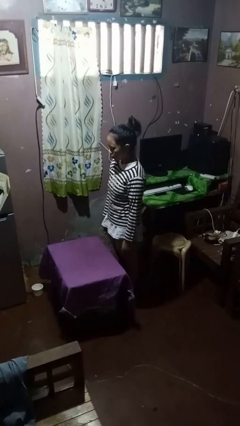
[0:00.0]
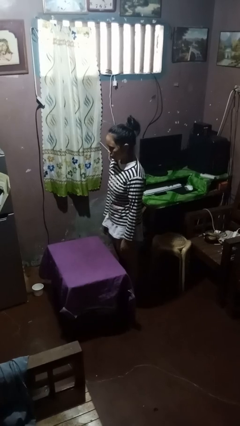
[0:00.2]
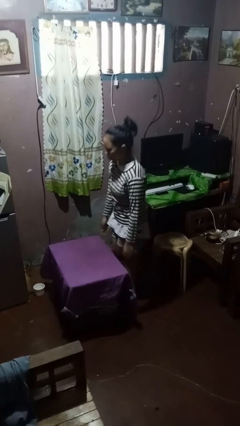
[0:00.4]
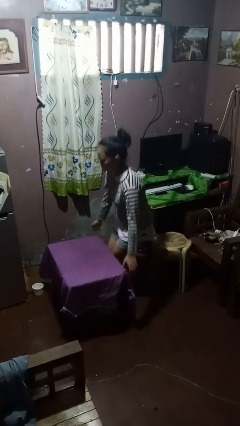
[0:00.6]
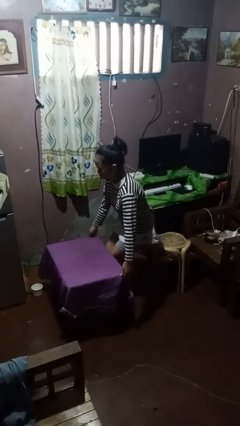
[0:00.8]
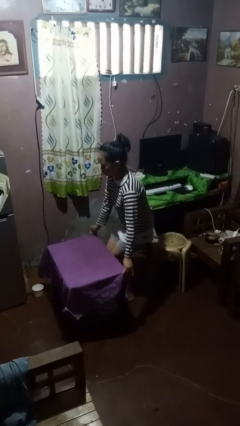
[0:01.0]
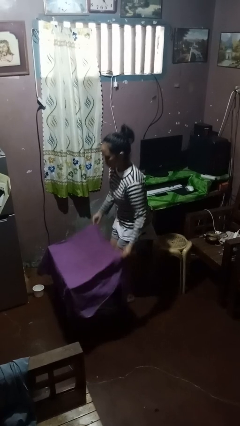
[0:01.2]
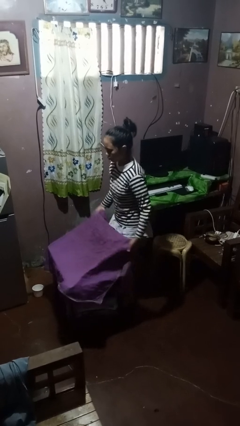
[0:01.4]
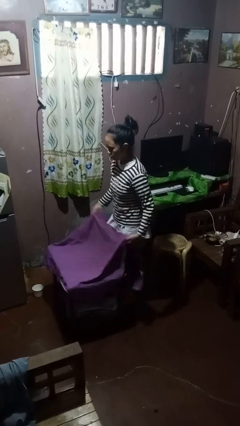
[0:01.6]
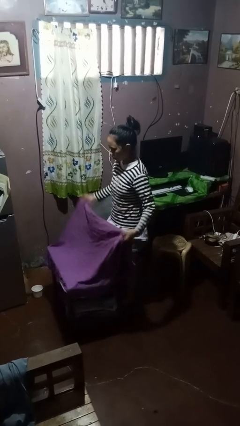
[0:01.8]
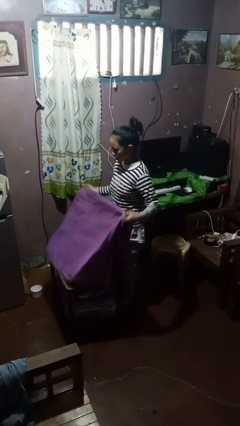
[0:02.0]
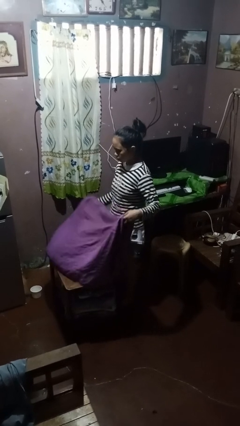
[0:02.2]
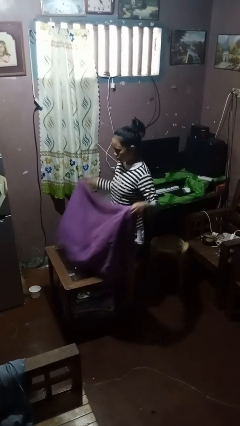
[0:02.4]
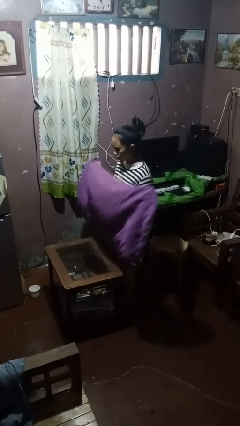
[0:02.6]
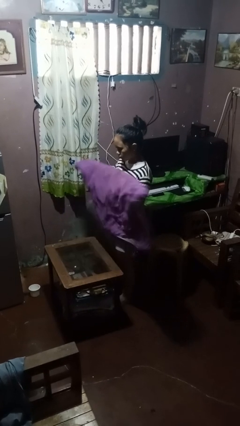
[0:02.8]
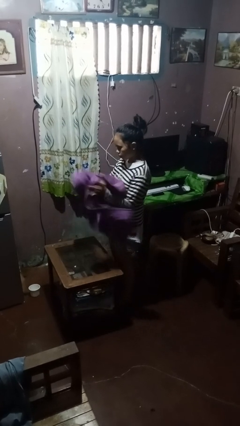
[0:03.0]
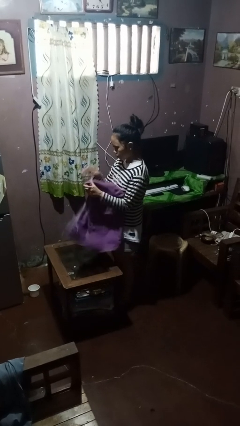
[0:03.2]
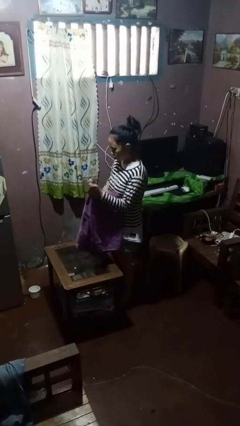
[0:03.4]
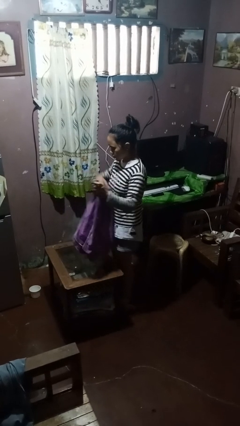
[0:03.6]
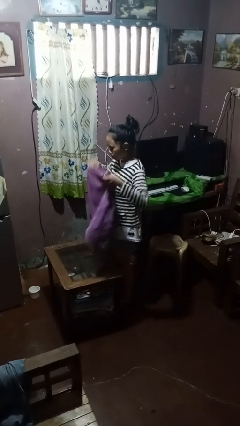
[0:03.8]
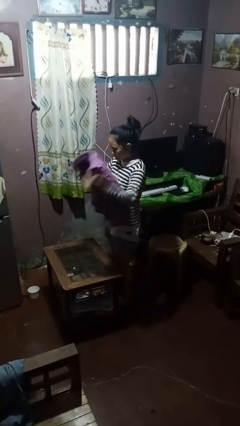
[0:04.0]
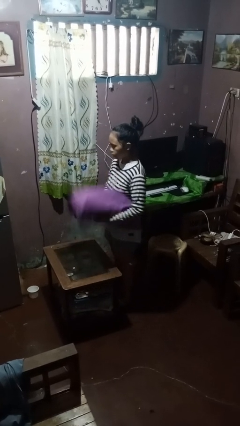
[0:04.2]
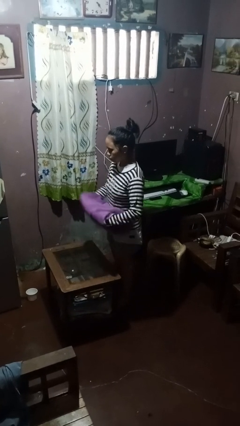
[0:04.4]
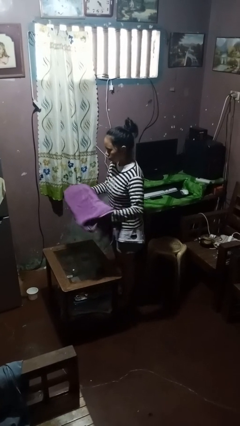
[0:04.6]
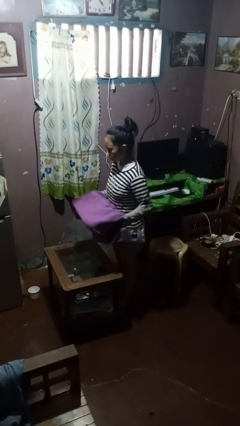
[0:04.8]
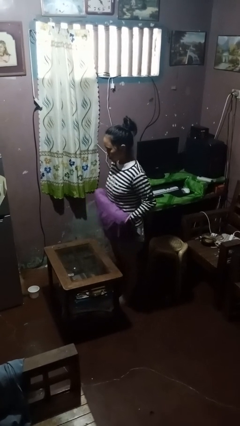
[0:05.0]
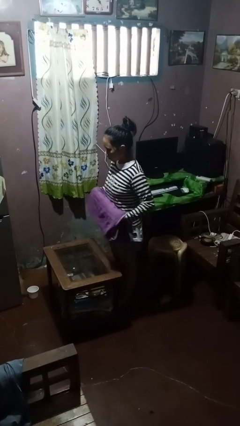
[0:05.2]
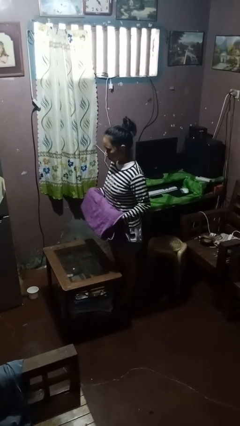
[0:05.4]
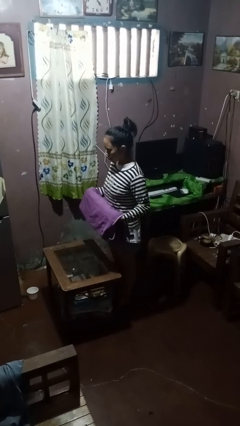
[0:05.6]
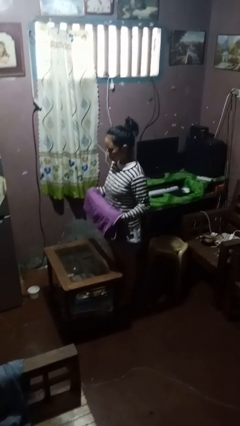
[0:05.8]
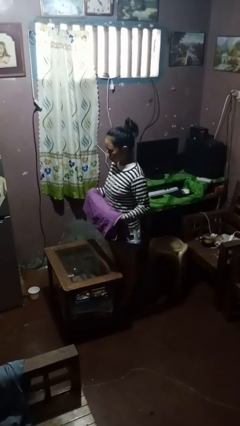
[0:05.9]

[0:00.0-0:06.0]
person folds tablecloth

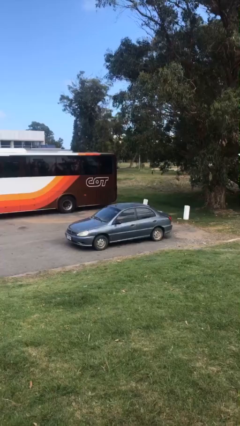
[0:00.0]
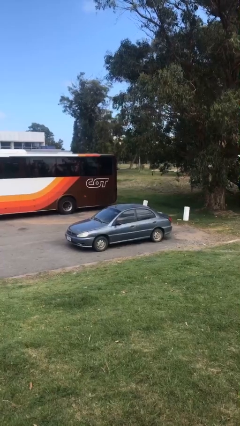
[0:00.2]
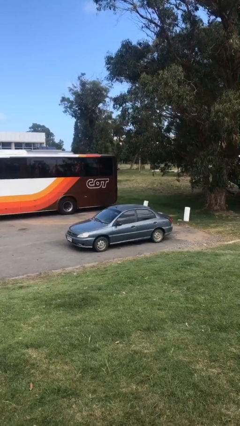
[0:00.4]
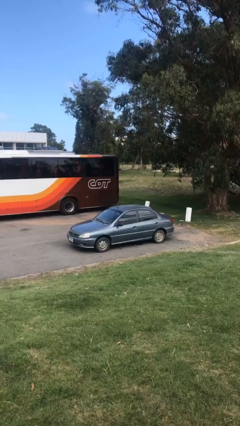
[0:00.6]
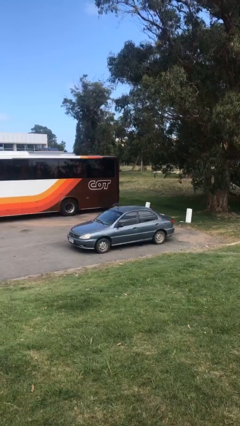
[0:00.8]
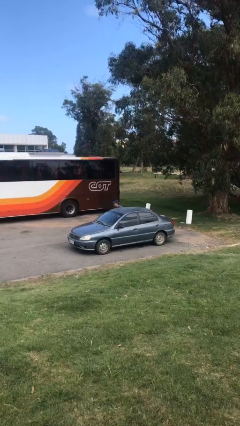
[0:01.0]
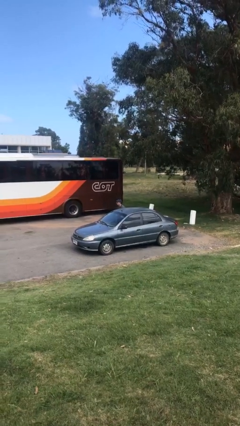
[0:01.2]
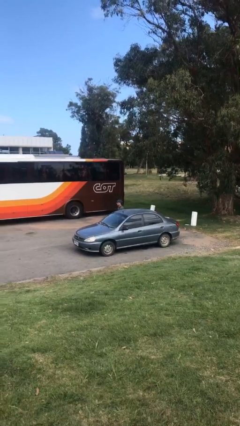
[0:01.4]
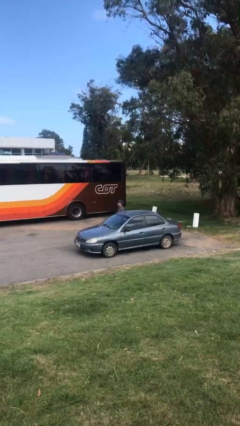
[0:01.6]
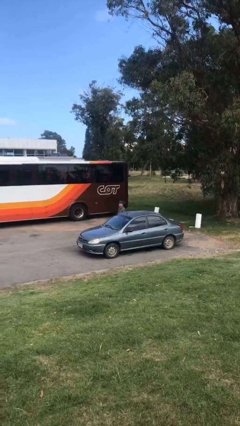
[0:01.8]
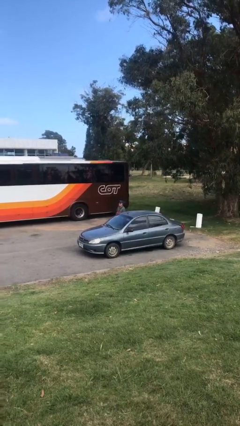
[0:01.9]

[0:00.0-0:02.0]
person exits car

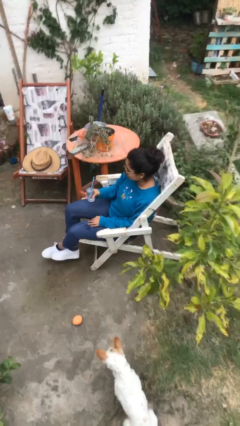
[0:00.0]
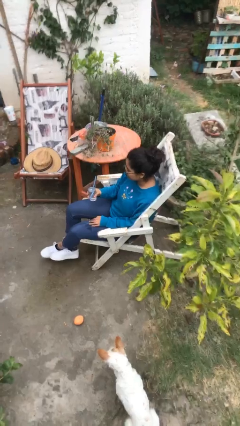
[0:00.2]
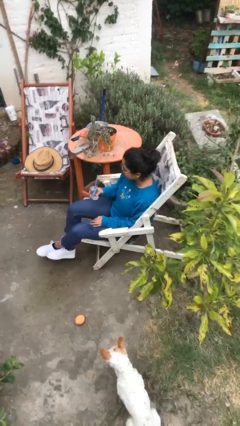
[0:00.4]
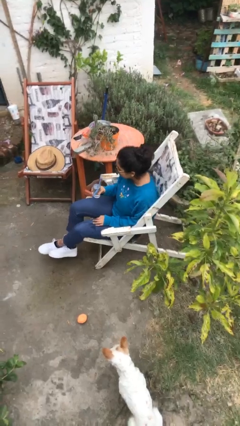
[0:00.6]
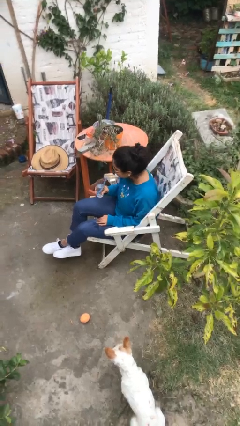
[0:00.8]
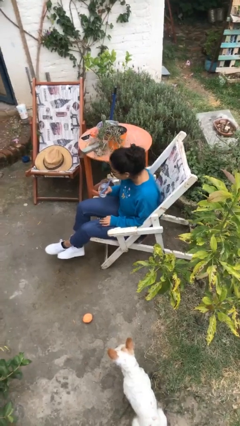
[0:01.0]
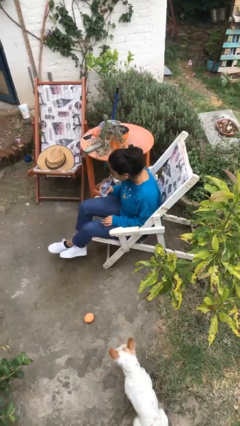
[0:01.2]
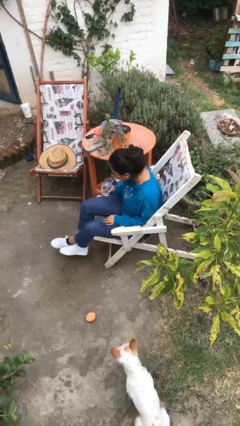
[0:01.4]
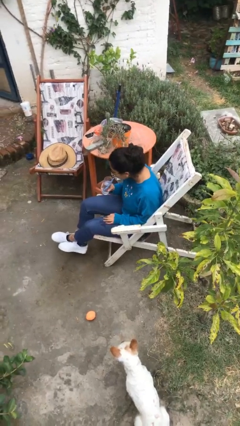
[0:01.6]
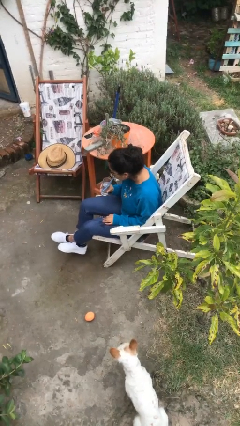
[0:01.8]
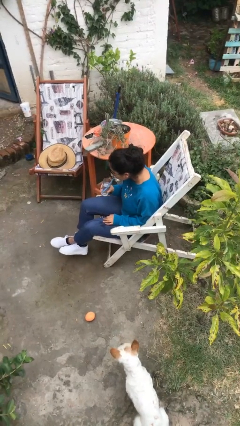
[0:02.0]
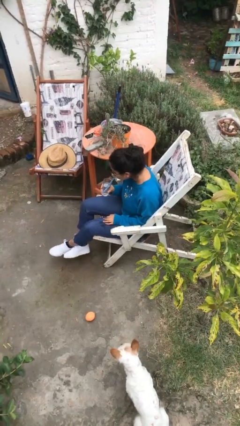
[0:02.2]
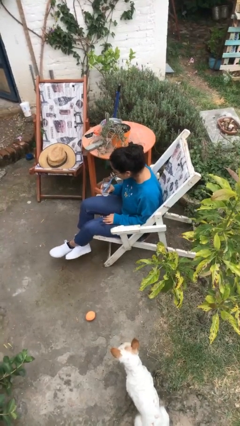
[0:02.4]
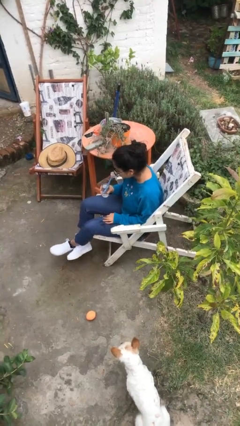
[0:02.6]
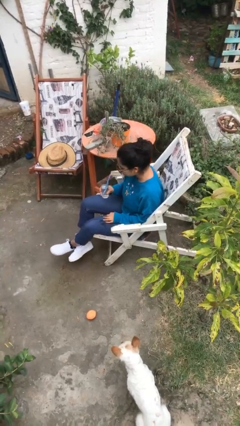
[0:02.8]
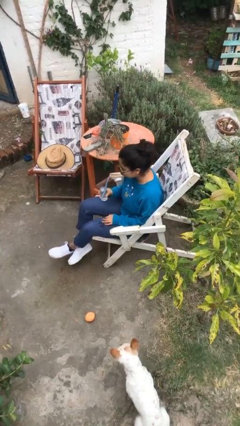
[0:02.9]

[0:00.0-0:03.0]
person drinks from straw

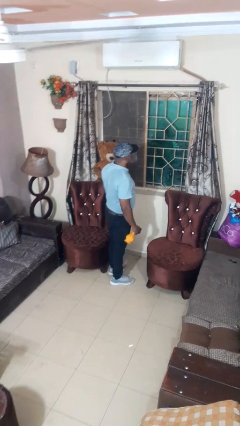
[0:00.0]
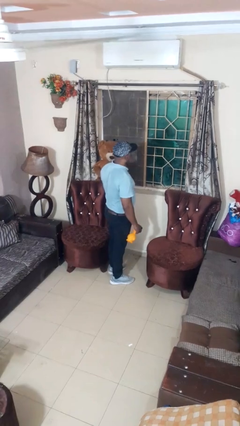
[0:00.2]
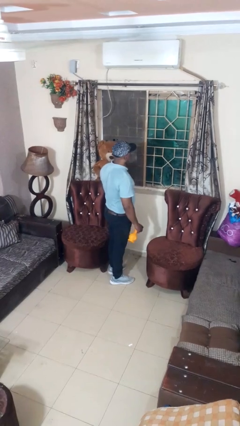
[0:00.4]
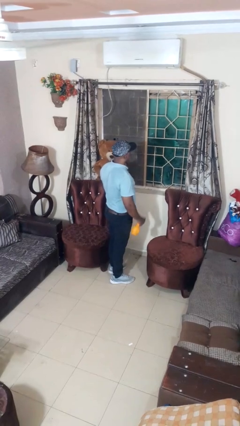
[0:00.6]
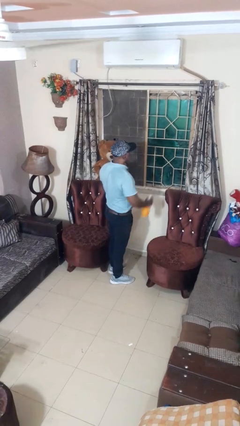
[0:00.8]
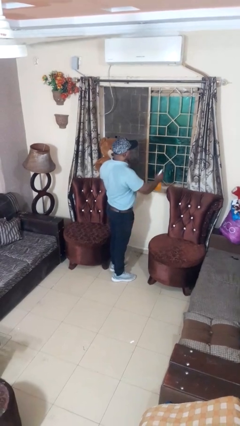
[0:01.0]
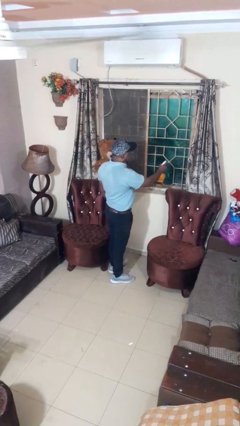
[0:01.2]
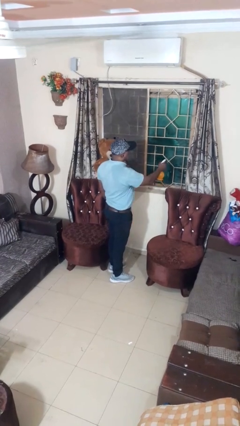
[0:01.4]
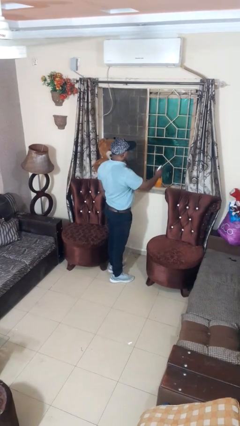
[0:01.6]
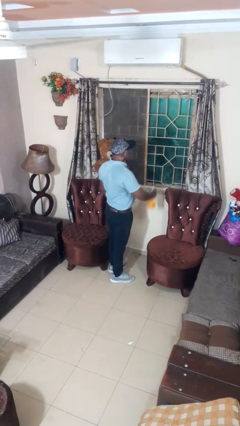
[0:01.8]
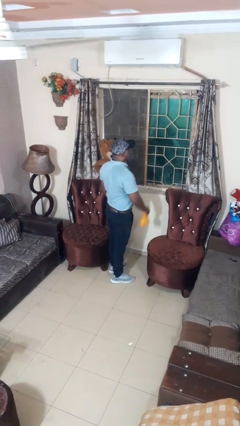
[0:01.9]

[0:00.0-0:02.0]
person sprays from bottle

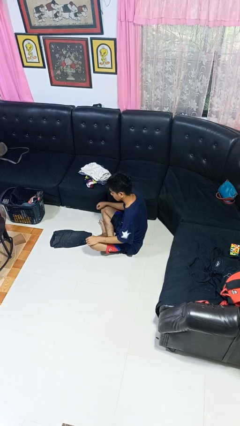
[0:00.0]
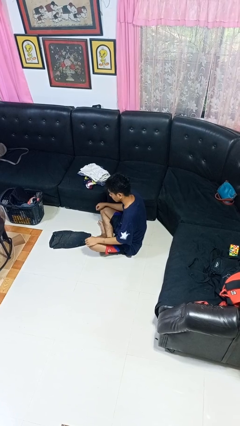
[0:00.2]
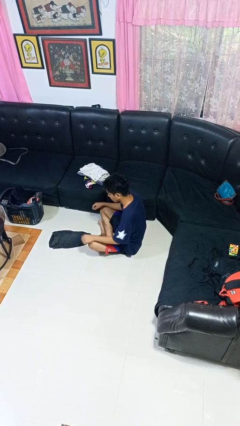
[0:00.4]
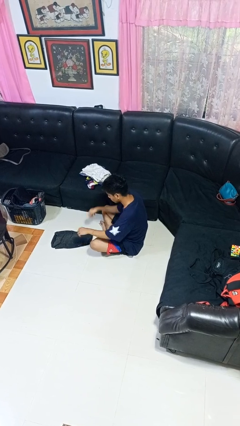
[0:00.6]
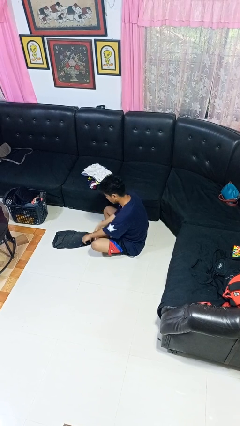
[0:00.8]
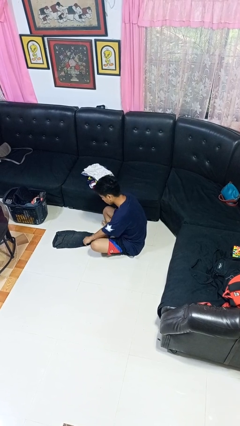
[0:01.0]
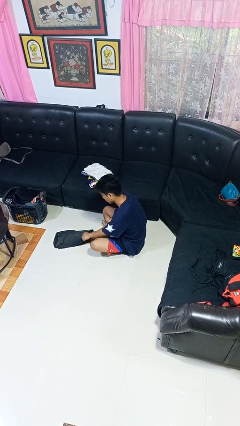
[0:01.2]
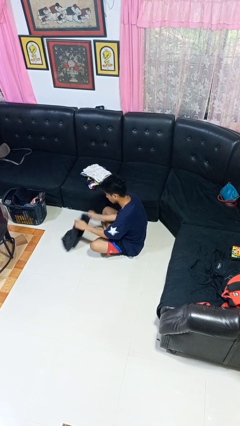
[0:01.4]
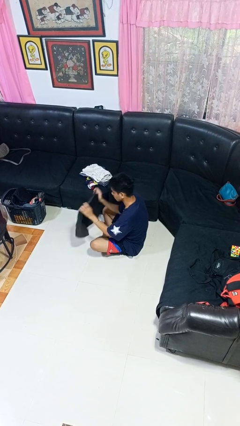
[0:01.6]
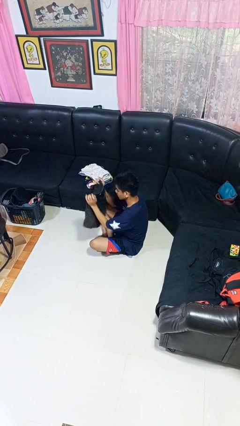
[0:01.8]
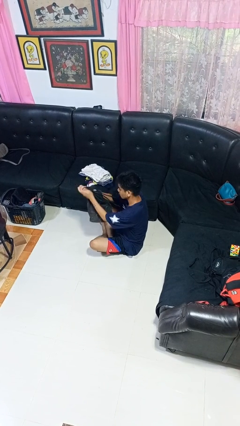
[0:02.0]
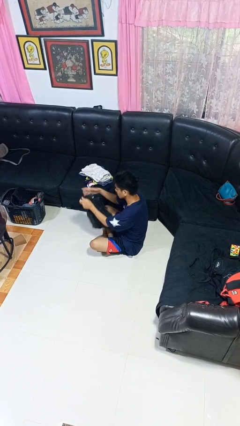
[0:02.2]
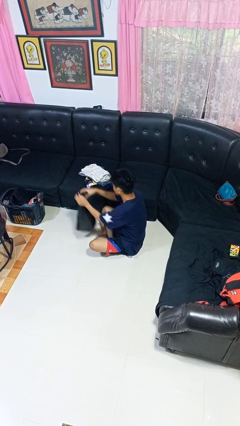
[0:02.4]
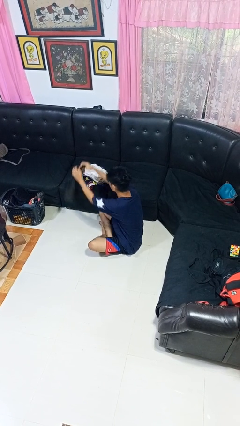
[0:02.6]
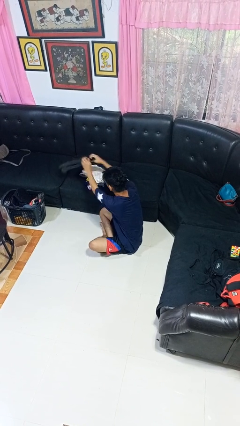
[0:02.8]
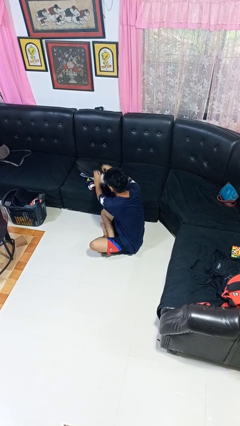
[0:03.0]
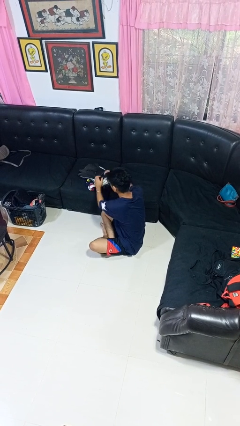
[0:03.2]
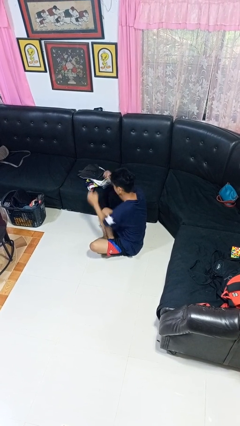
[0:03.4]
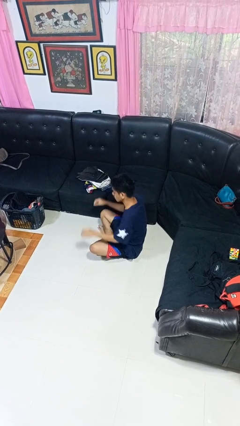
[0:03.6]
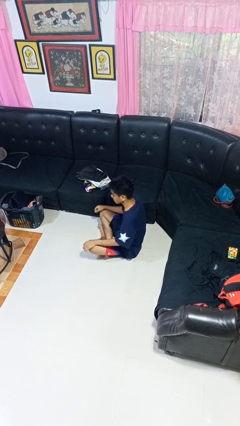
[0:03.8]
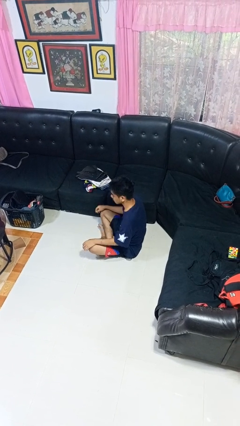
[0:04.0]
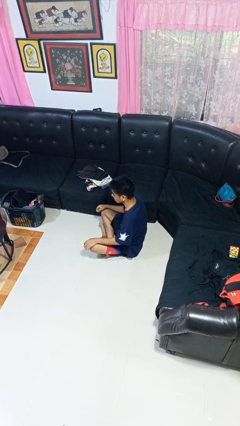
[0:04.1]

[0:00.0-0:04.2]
person folds pants

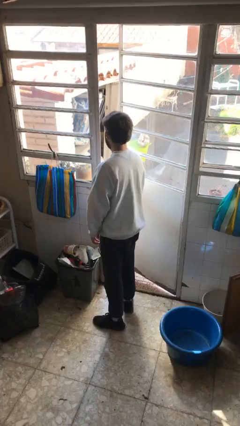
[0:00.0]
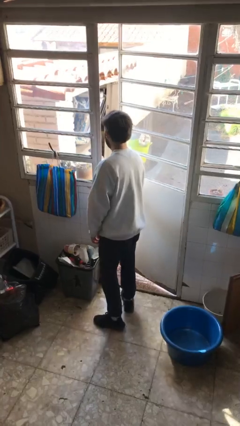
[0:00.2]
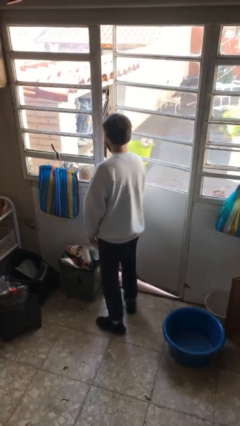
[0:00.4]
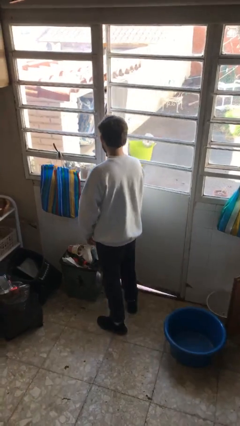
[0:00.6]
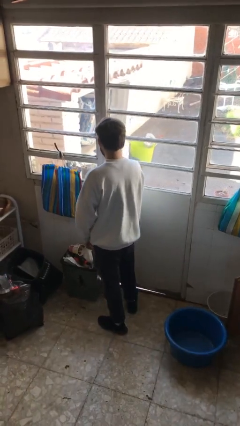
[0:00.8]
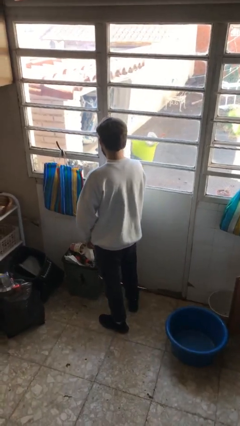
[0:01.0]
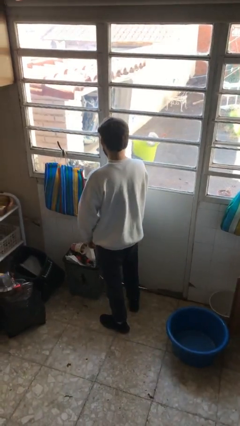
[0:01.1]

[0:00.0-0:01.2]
person closes facility door
